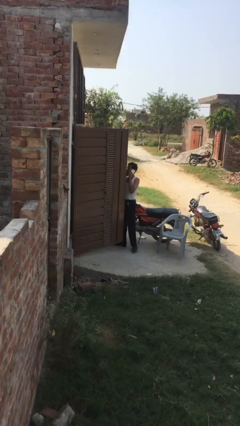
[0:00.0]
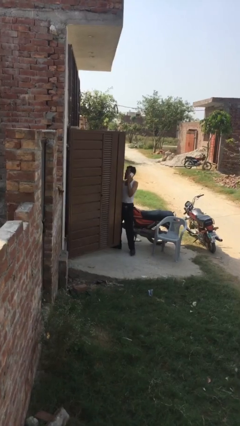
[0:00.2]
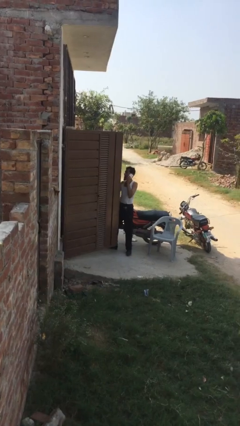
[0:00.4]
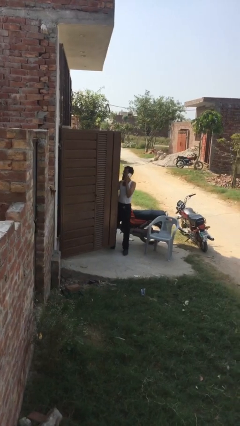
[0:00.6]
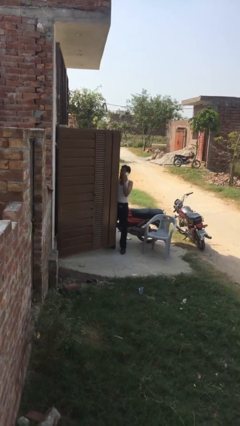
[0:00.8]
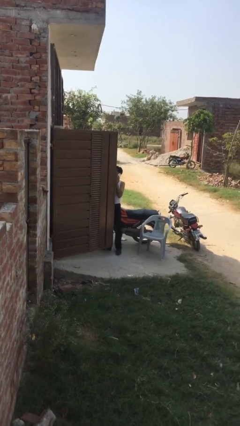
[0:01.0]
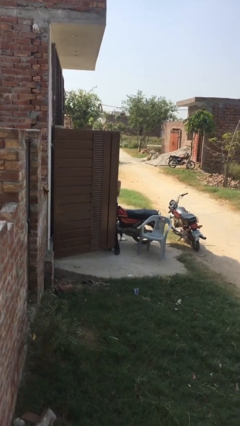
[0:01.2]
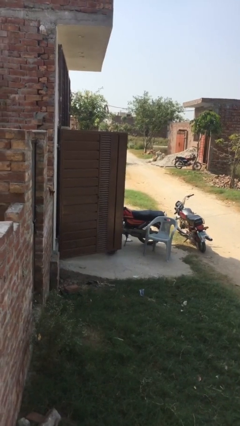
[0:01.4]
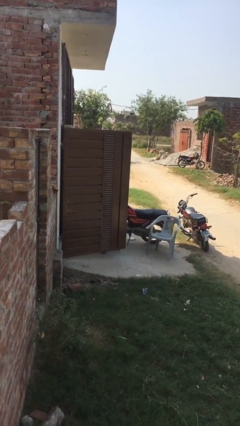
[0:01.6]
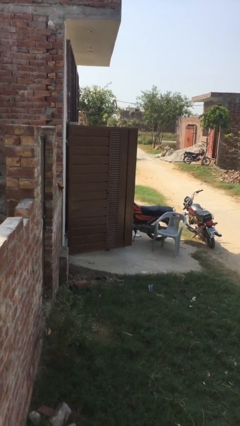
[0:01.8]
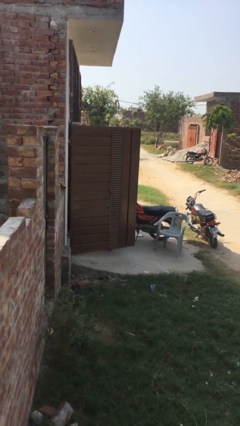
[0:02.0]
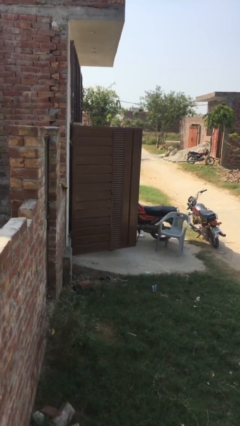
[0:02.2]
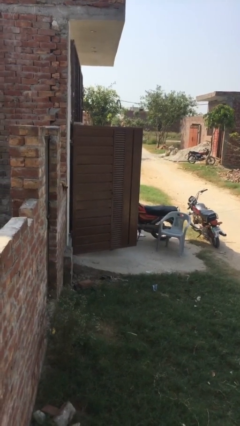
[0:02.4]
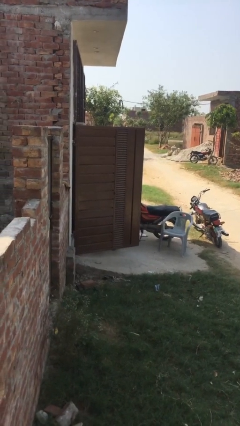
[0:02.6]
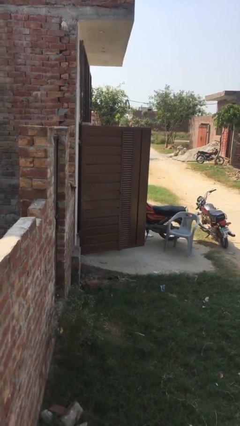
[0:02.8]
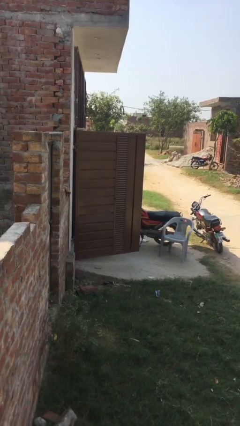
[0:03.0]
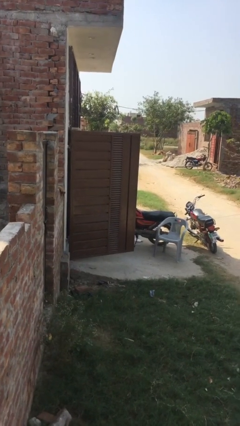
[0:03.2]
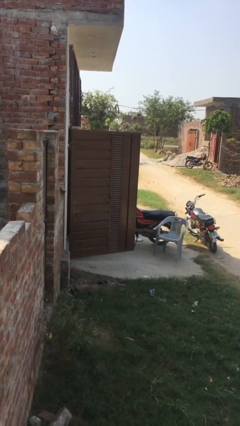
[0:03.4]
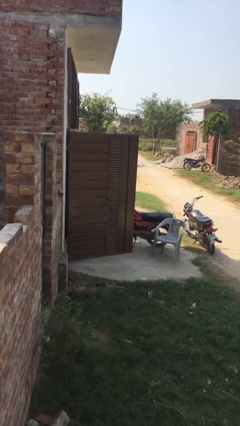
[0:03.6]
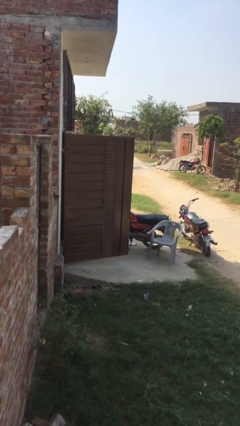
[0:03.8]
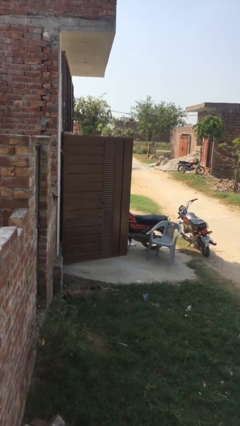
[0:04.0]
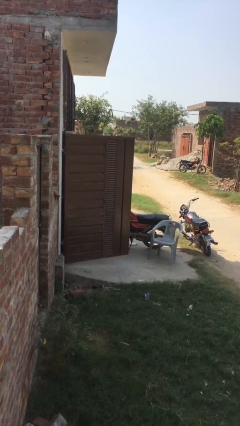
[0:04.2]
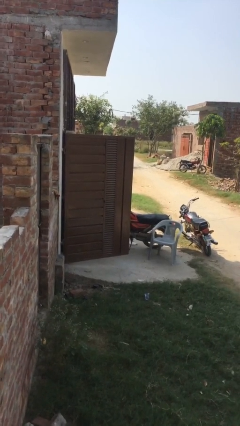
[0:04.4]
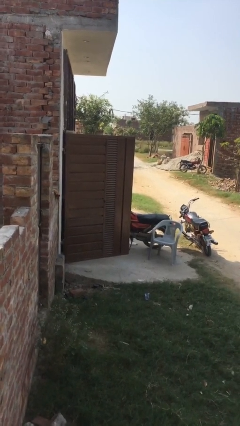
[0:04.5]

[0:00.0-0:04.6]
person exits scene through structure

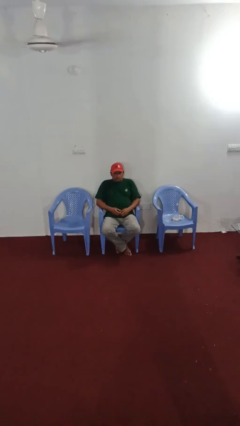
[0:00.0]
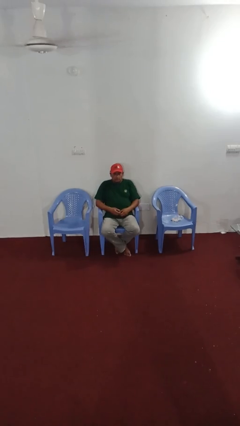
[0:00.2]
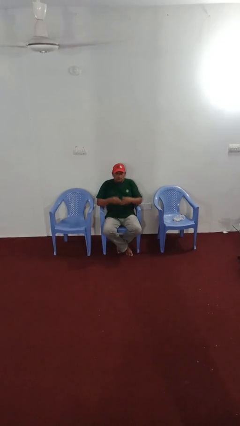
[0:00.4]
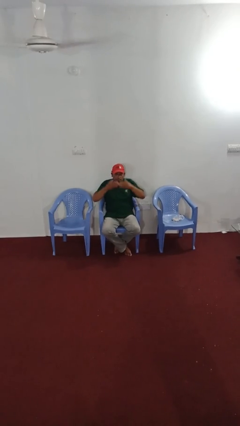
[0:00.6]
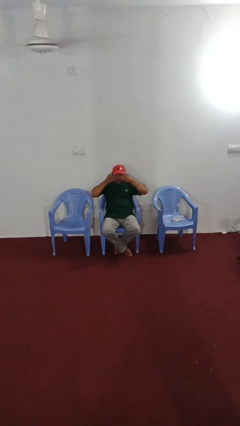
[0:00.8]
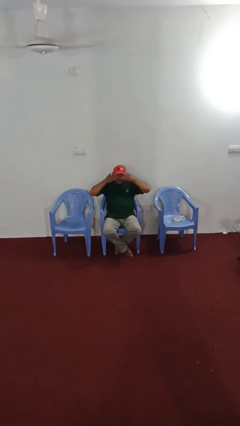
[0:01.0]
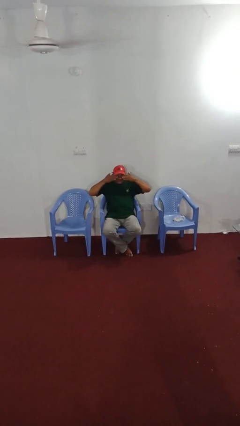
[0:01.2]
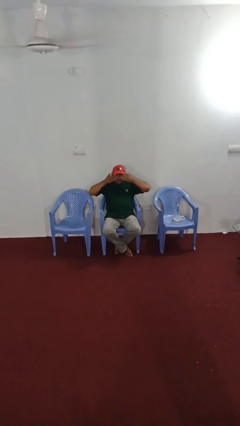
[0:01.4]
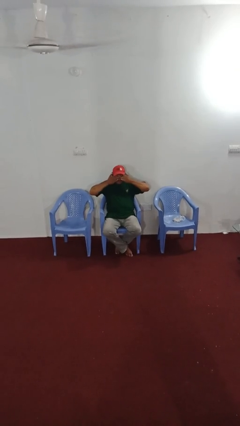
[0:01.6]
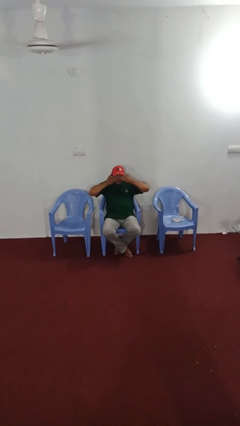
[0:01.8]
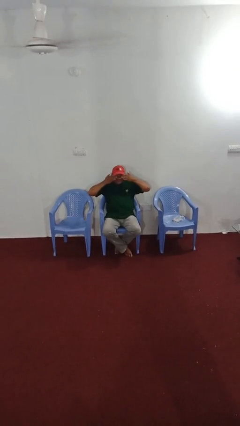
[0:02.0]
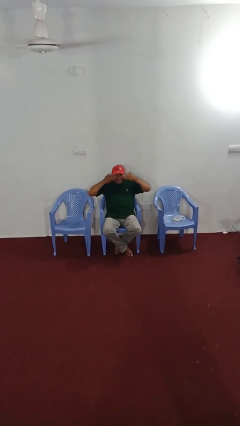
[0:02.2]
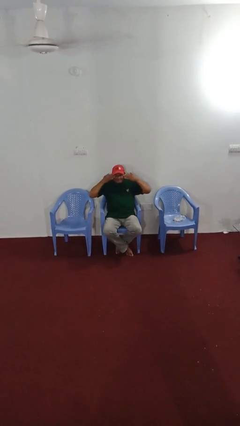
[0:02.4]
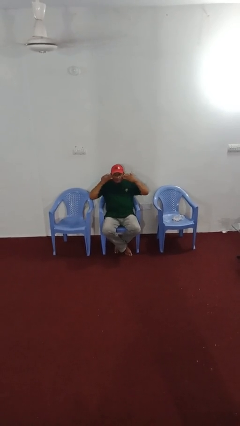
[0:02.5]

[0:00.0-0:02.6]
person rubs eyes

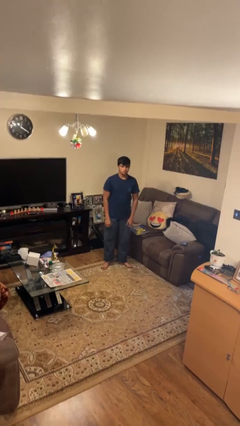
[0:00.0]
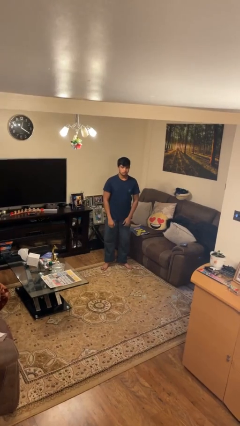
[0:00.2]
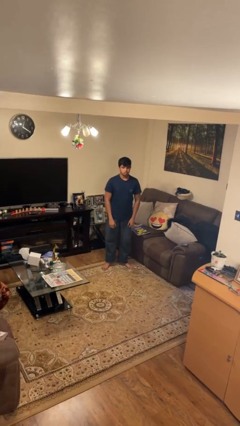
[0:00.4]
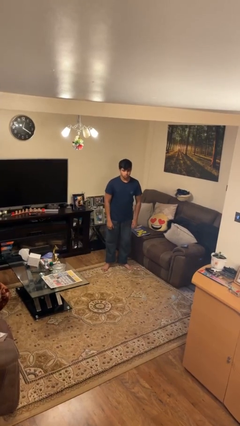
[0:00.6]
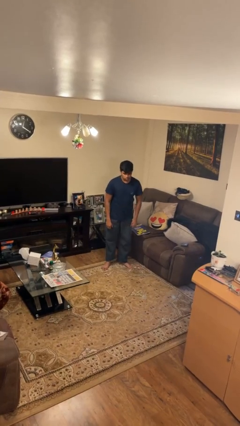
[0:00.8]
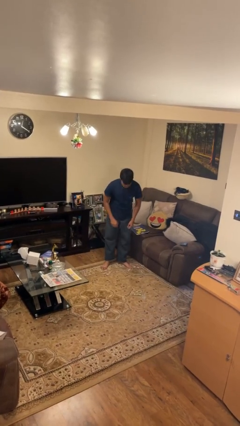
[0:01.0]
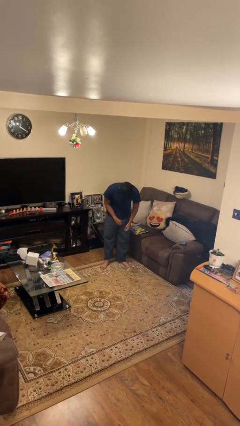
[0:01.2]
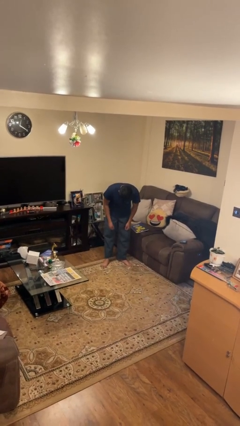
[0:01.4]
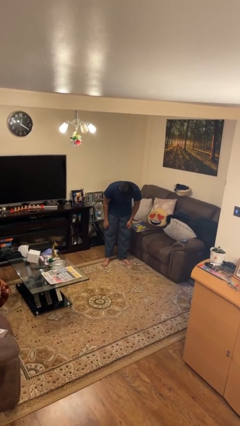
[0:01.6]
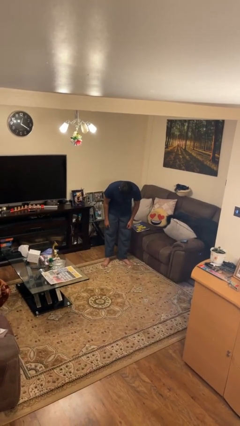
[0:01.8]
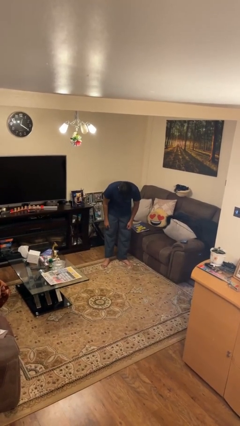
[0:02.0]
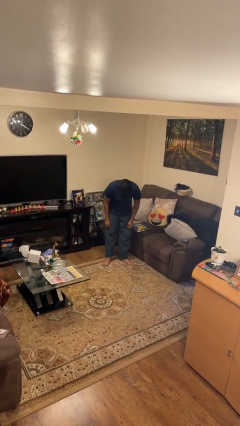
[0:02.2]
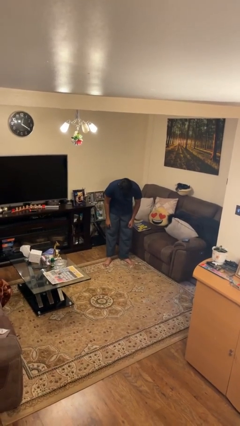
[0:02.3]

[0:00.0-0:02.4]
person bows

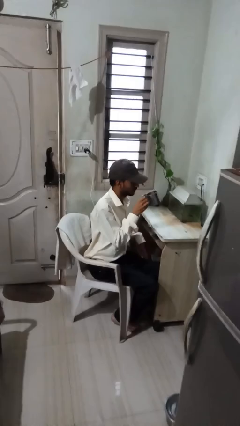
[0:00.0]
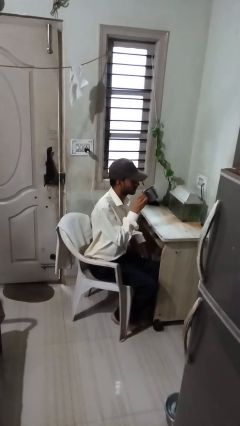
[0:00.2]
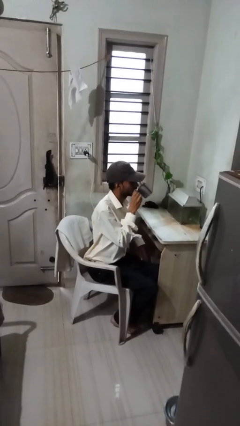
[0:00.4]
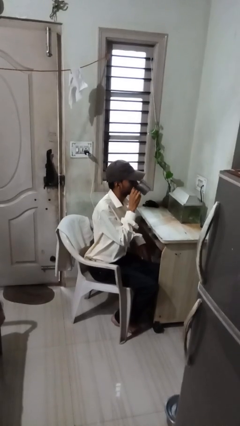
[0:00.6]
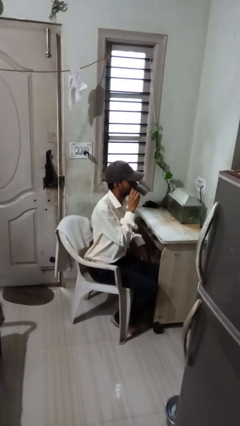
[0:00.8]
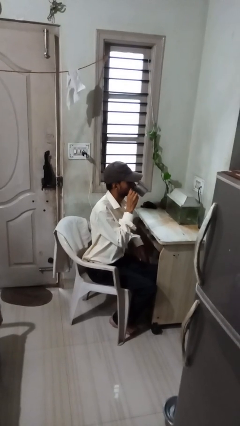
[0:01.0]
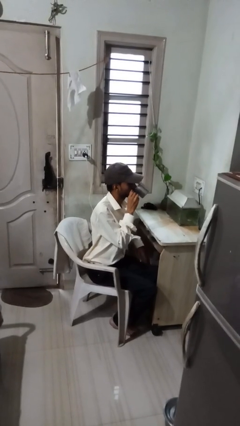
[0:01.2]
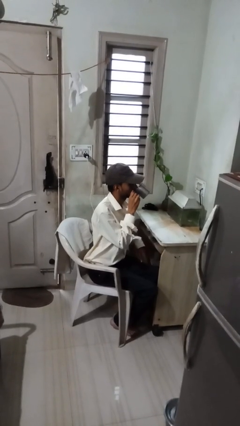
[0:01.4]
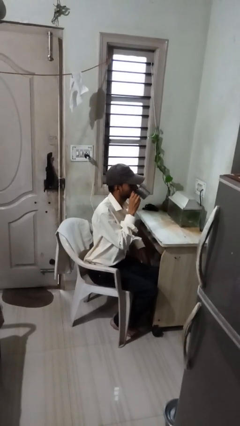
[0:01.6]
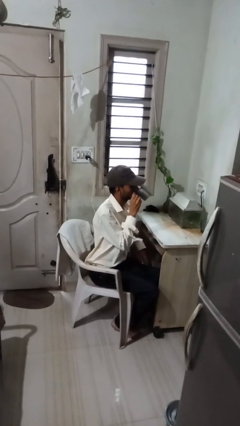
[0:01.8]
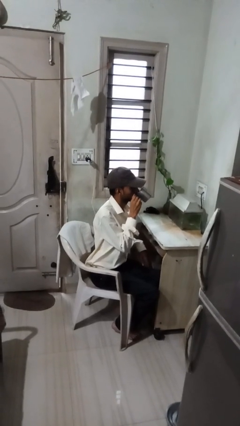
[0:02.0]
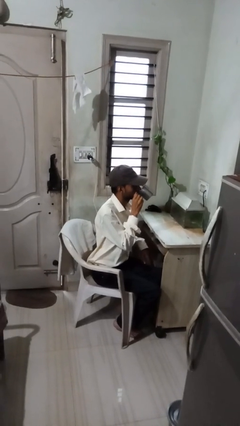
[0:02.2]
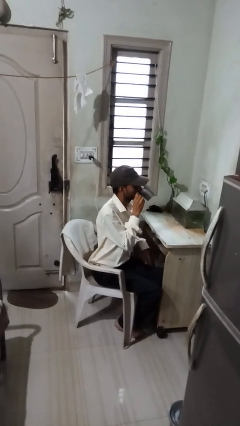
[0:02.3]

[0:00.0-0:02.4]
person drinks from mug

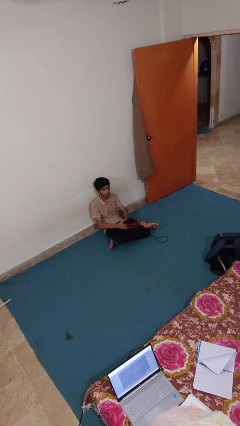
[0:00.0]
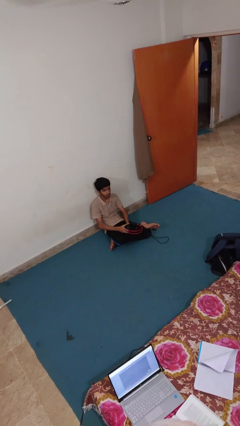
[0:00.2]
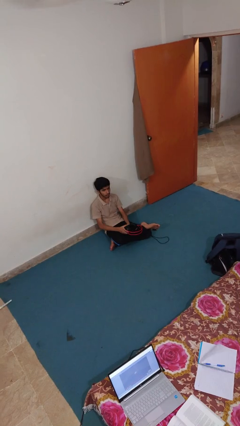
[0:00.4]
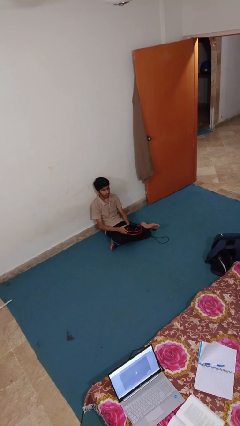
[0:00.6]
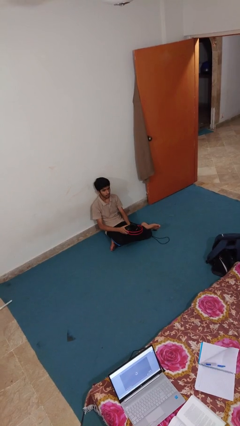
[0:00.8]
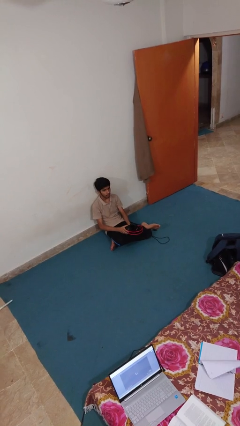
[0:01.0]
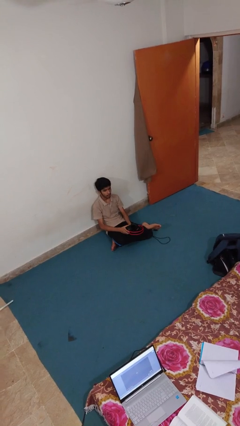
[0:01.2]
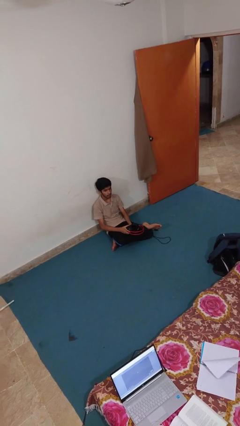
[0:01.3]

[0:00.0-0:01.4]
person takes off headphones

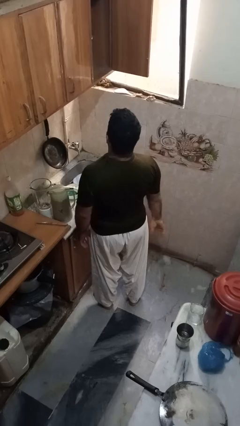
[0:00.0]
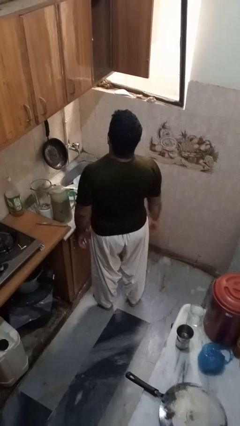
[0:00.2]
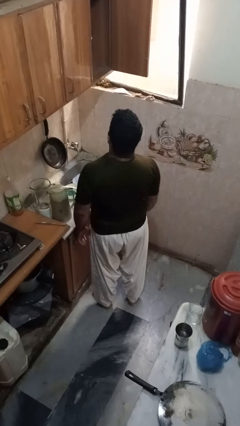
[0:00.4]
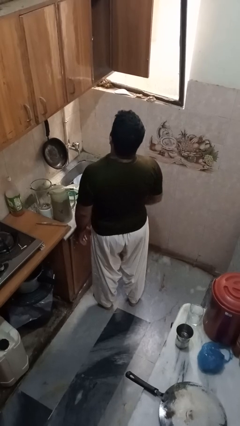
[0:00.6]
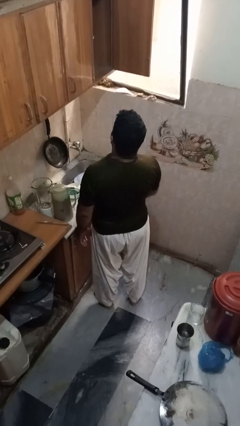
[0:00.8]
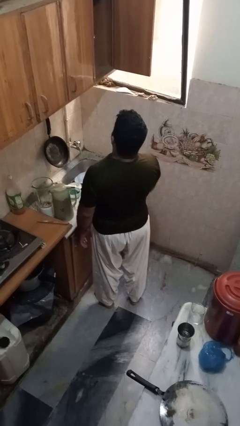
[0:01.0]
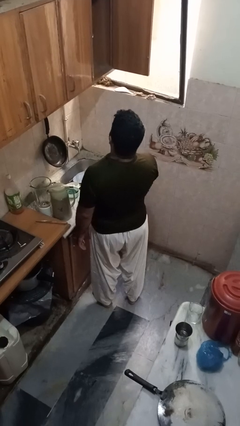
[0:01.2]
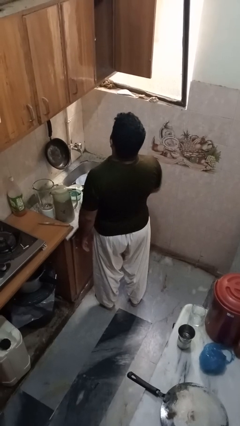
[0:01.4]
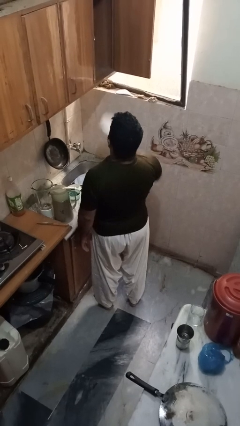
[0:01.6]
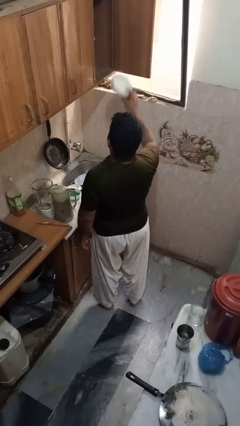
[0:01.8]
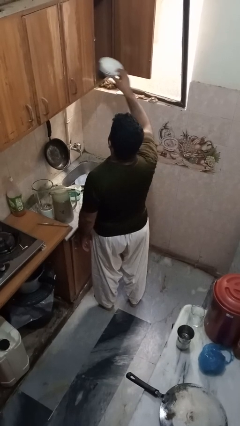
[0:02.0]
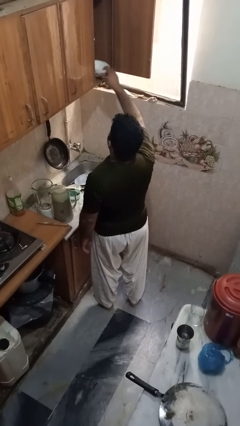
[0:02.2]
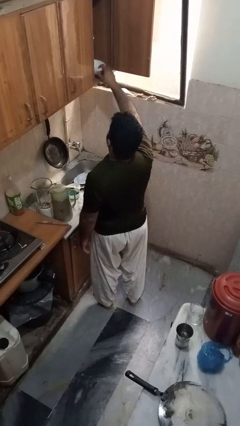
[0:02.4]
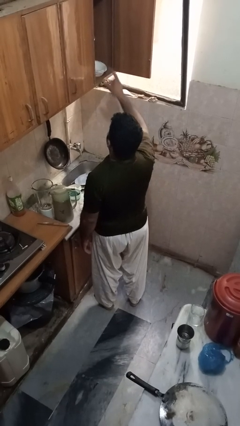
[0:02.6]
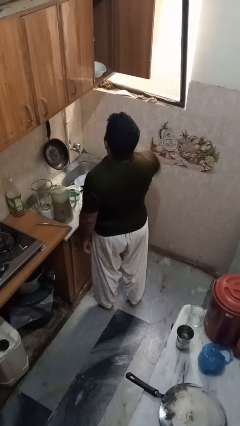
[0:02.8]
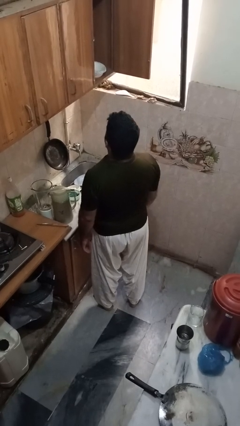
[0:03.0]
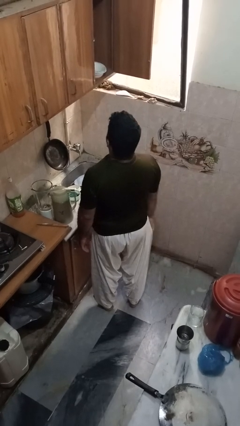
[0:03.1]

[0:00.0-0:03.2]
person puts object in cabinet

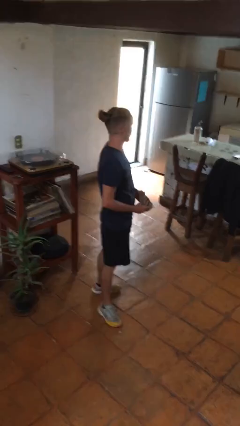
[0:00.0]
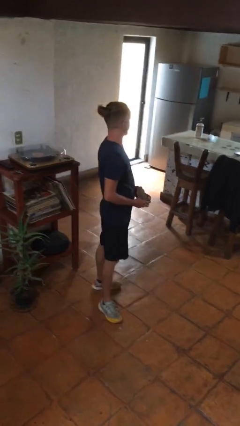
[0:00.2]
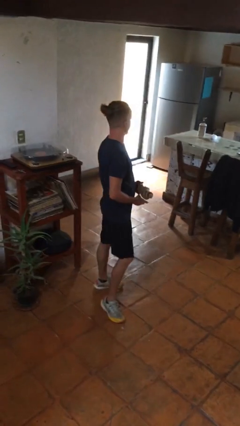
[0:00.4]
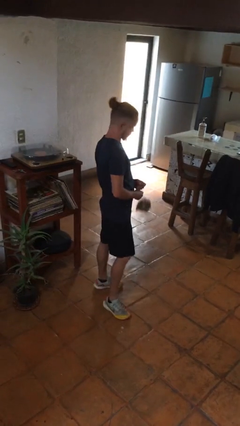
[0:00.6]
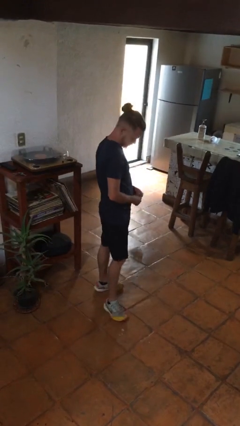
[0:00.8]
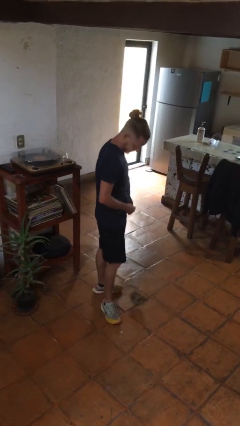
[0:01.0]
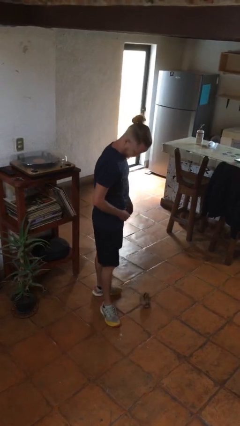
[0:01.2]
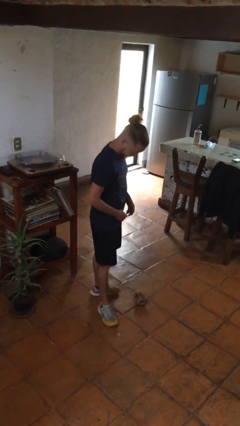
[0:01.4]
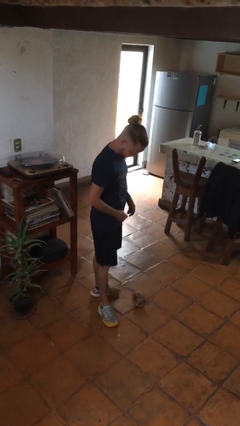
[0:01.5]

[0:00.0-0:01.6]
person drops object
